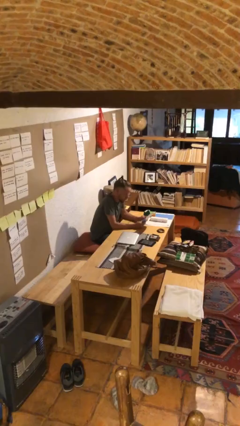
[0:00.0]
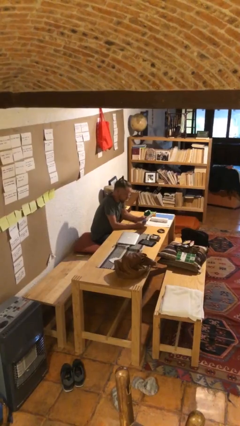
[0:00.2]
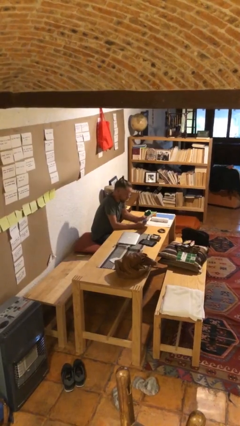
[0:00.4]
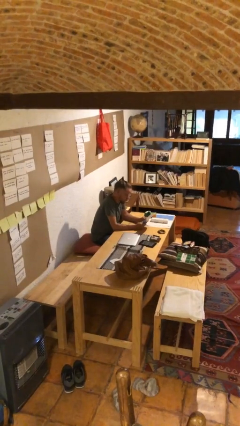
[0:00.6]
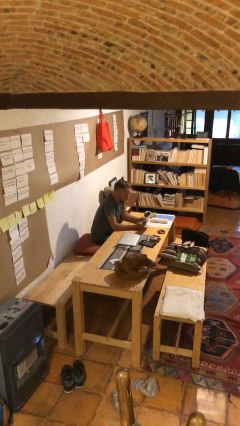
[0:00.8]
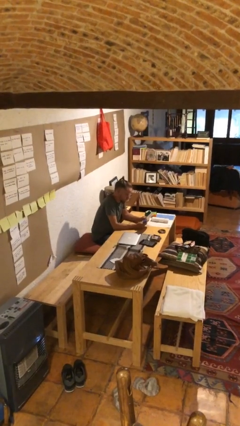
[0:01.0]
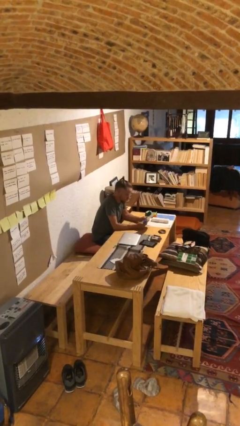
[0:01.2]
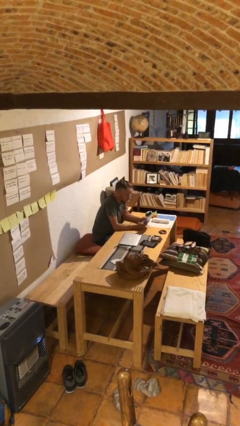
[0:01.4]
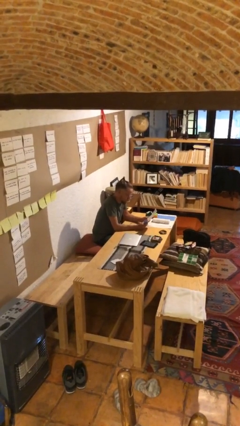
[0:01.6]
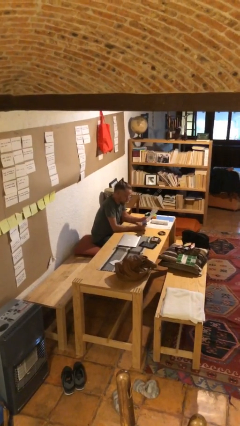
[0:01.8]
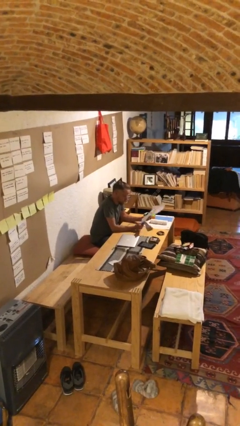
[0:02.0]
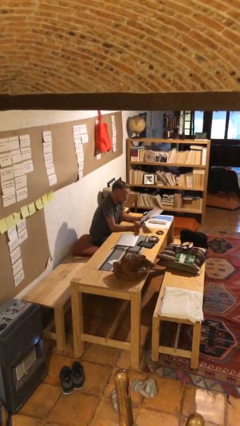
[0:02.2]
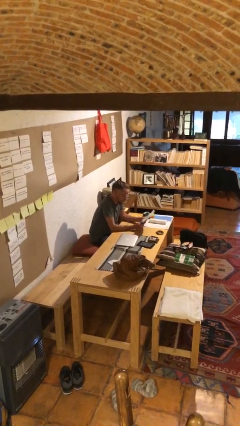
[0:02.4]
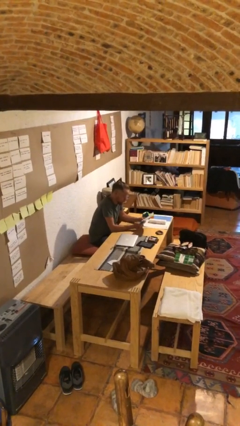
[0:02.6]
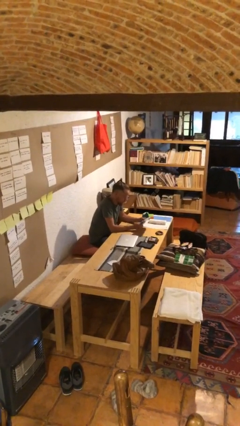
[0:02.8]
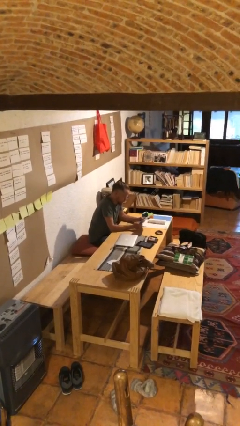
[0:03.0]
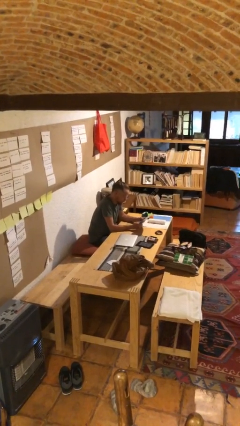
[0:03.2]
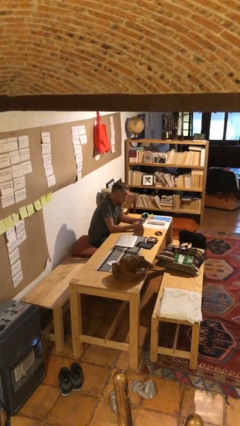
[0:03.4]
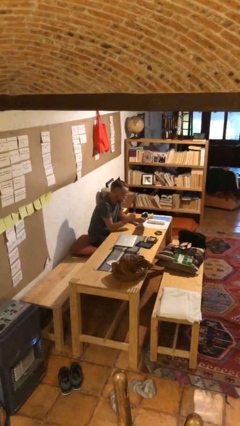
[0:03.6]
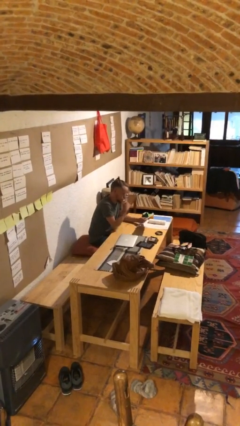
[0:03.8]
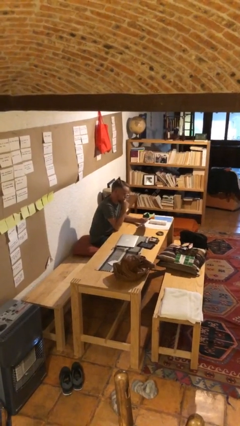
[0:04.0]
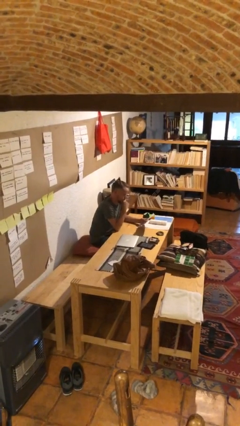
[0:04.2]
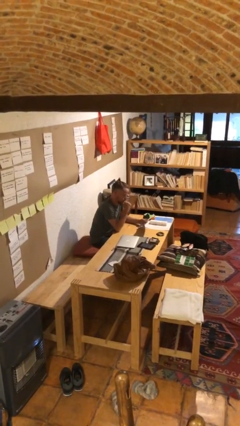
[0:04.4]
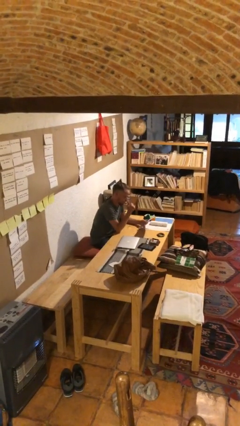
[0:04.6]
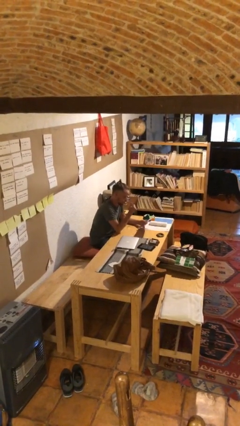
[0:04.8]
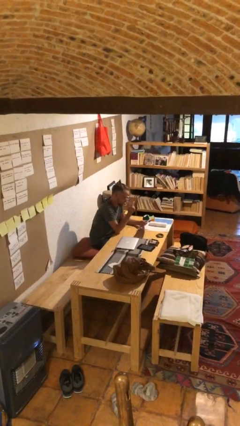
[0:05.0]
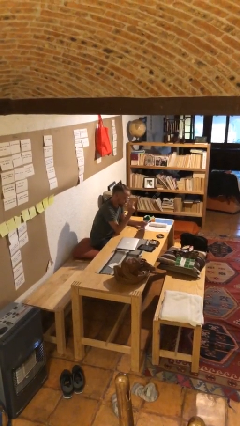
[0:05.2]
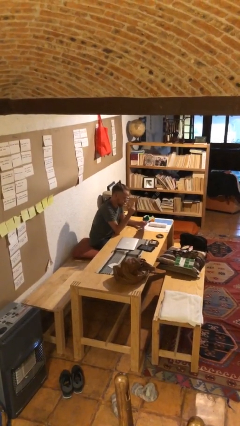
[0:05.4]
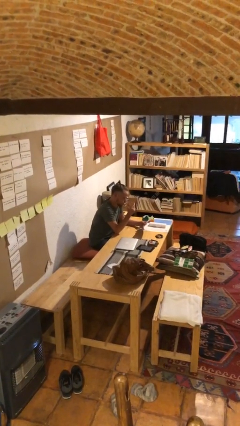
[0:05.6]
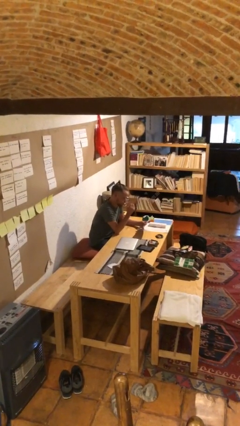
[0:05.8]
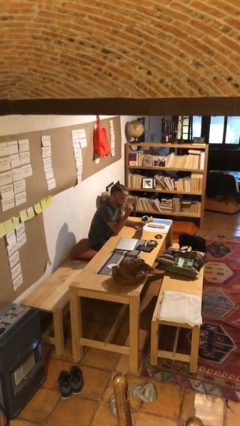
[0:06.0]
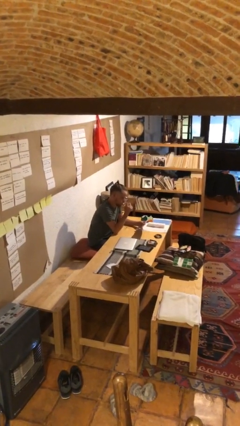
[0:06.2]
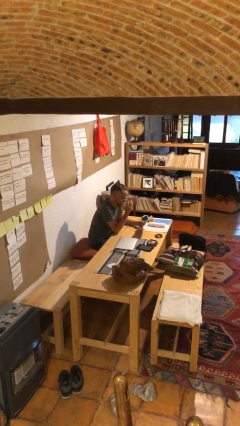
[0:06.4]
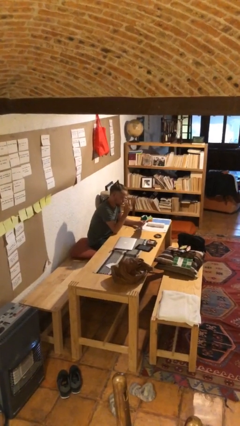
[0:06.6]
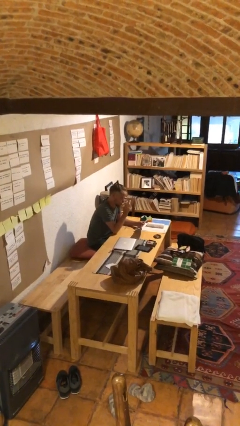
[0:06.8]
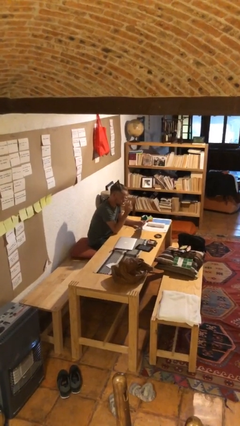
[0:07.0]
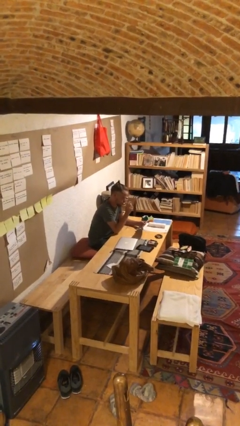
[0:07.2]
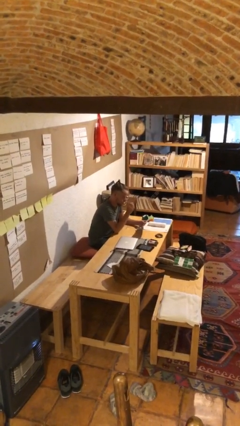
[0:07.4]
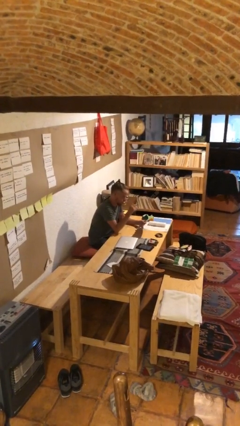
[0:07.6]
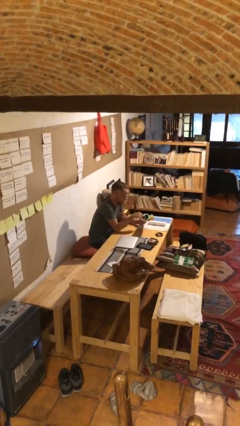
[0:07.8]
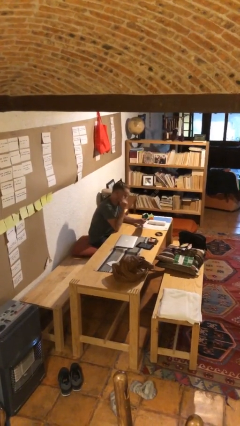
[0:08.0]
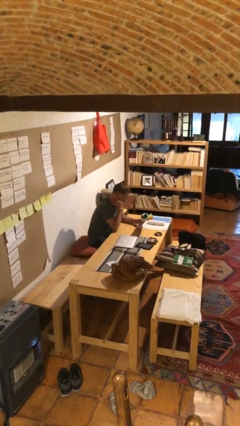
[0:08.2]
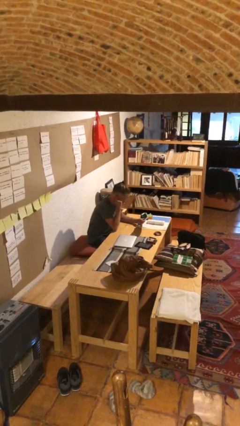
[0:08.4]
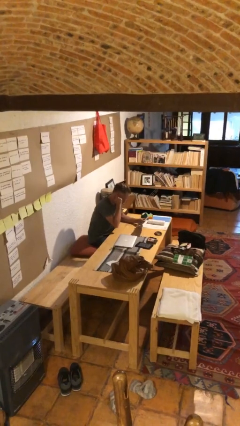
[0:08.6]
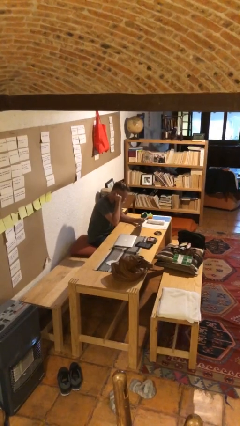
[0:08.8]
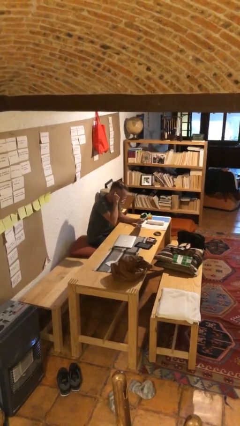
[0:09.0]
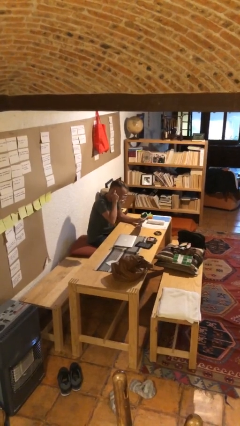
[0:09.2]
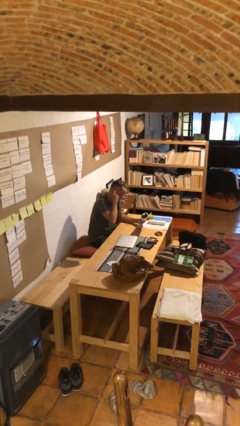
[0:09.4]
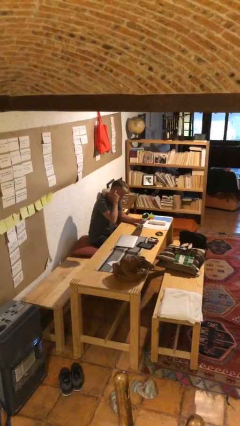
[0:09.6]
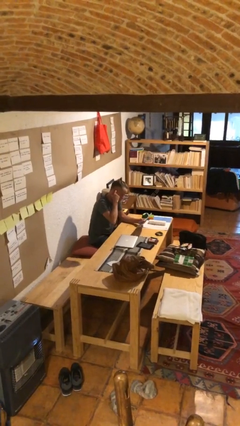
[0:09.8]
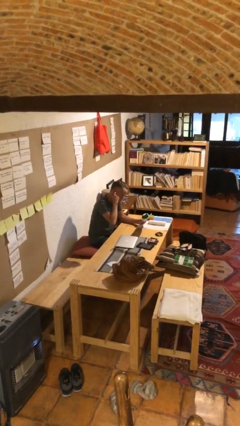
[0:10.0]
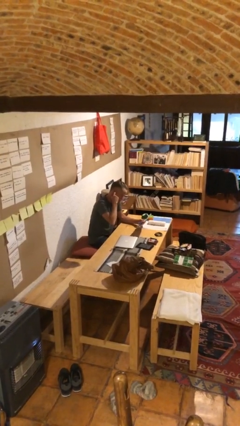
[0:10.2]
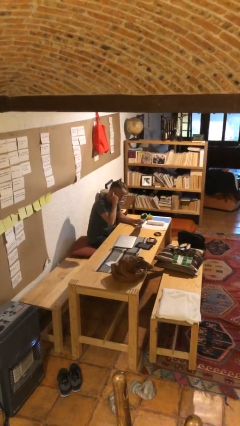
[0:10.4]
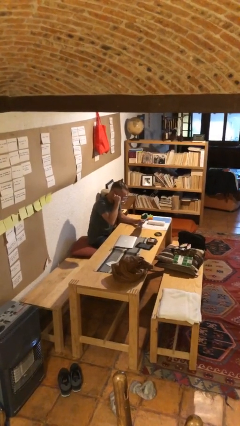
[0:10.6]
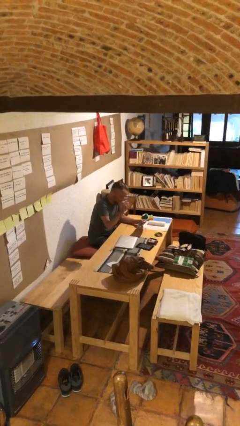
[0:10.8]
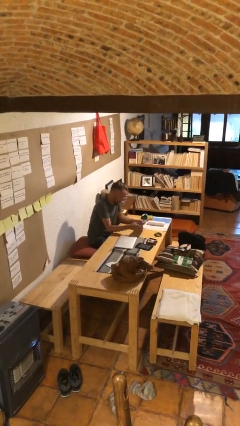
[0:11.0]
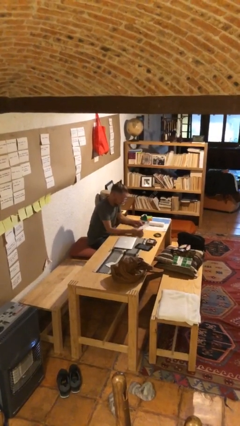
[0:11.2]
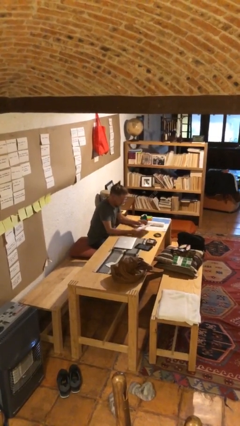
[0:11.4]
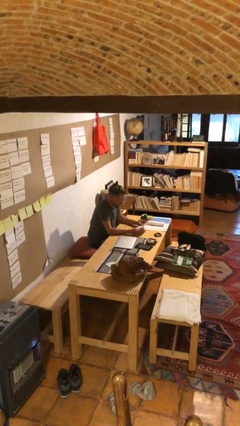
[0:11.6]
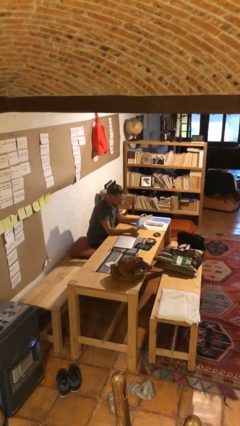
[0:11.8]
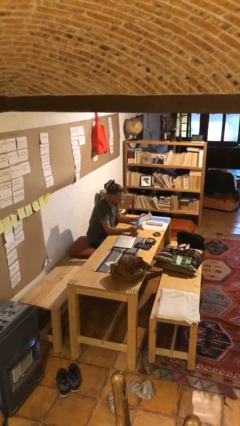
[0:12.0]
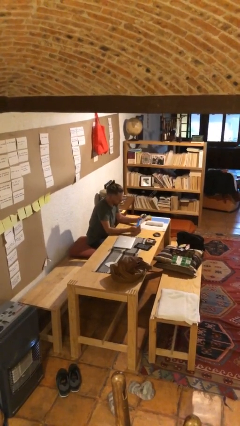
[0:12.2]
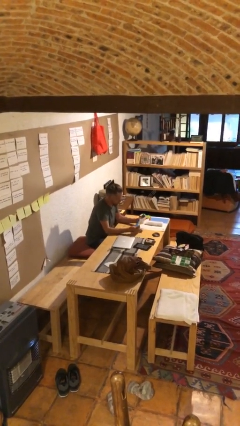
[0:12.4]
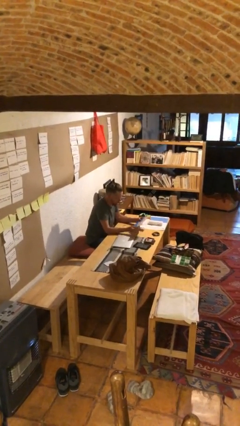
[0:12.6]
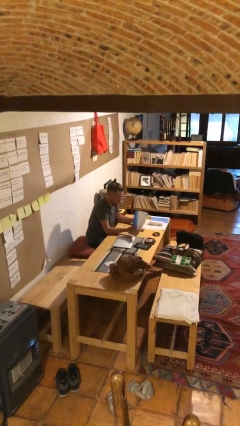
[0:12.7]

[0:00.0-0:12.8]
person reads document

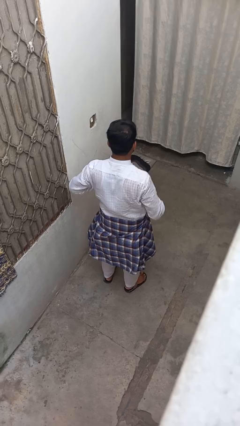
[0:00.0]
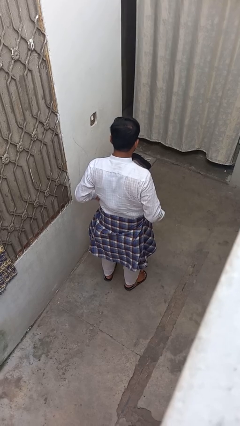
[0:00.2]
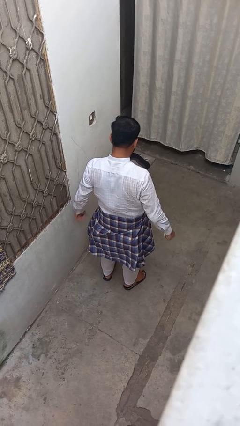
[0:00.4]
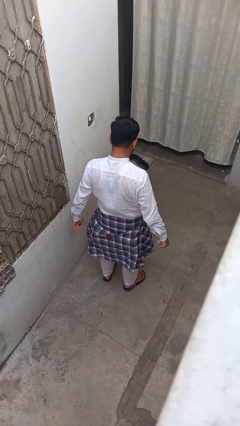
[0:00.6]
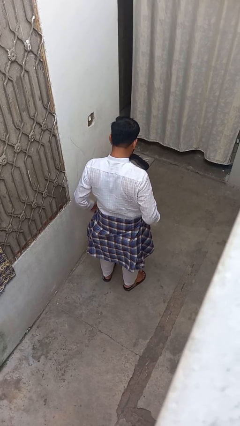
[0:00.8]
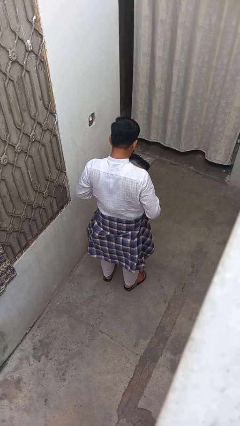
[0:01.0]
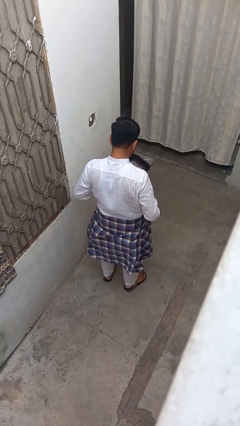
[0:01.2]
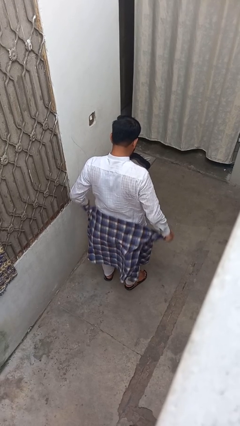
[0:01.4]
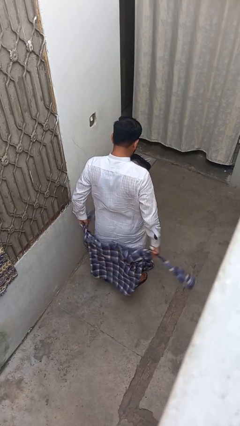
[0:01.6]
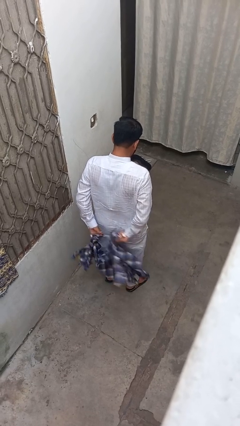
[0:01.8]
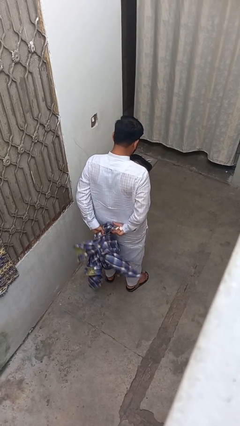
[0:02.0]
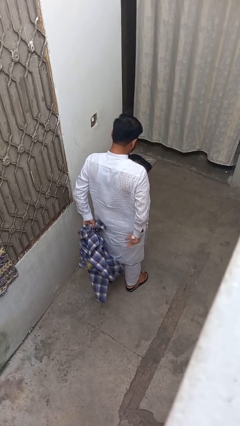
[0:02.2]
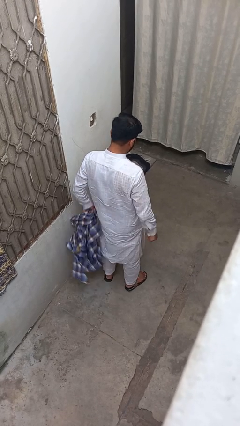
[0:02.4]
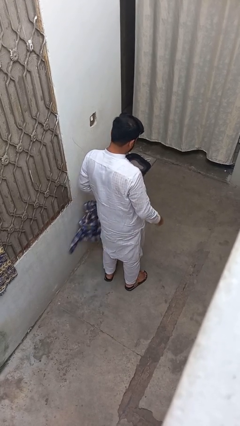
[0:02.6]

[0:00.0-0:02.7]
person unties jacket around waist

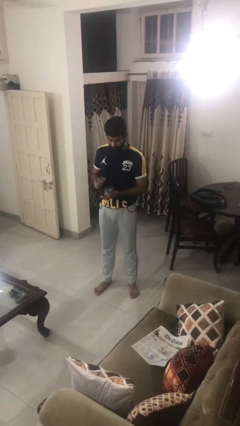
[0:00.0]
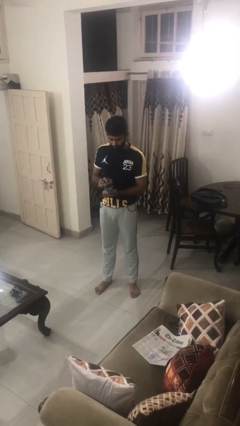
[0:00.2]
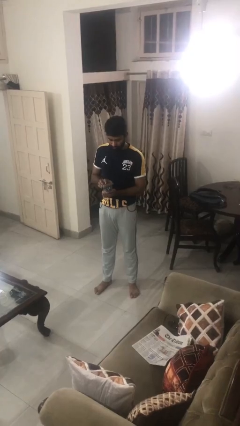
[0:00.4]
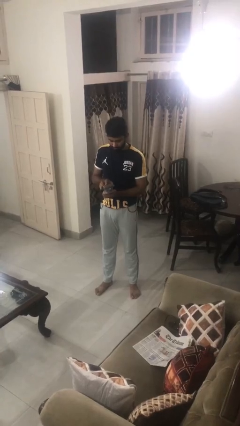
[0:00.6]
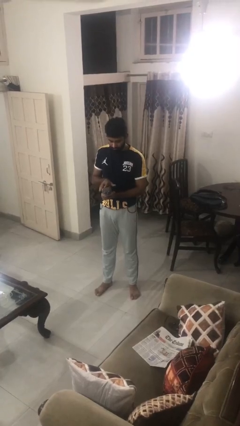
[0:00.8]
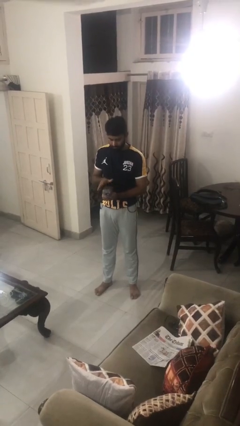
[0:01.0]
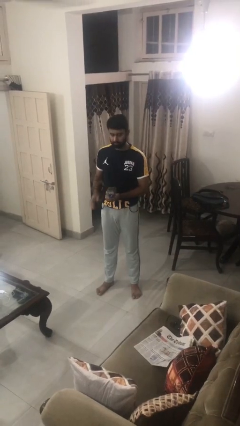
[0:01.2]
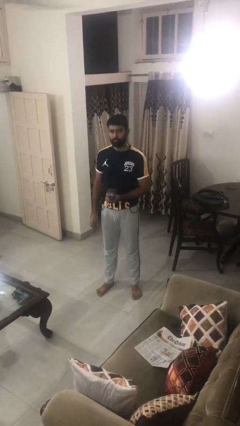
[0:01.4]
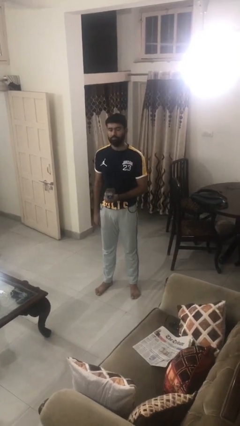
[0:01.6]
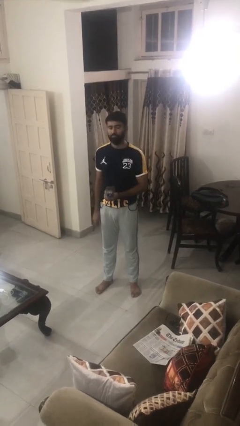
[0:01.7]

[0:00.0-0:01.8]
person closes jewelry box

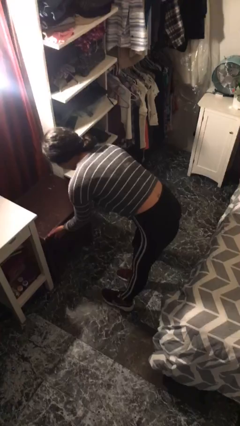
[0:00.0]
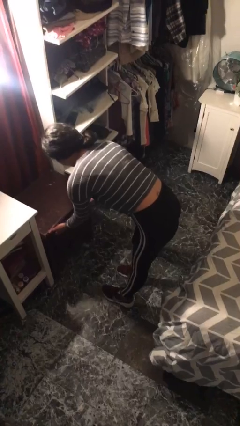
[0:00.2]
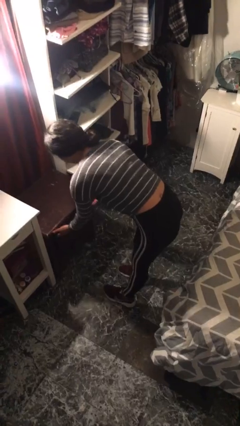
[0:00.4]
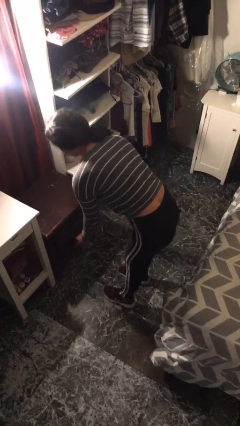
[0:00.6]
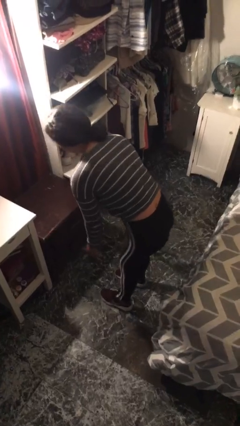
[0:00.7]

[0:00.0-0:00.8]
person closes dresser drawer
